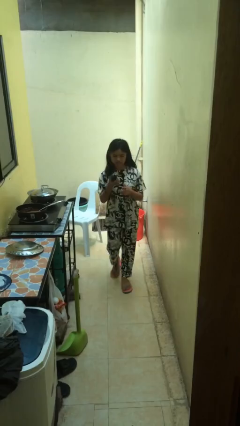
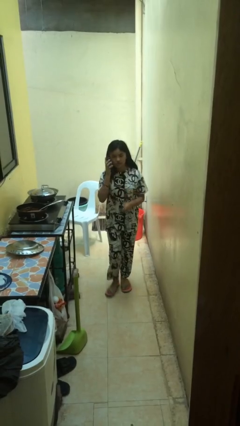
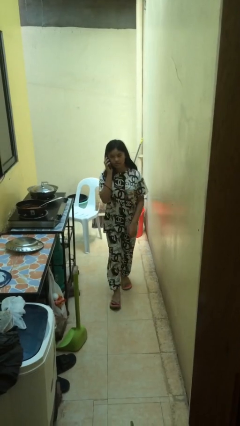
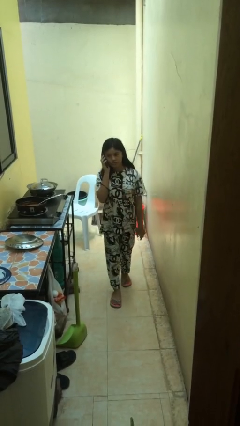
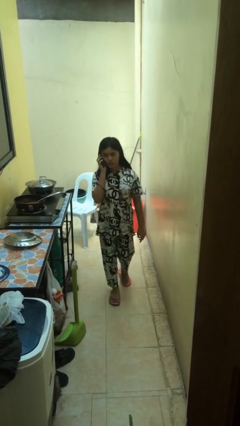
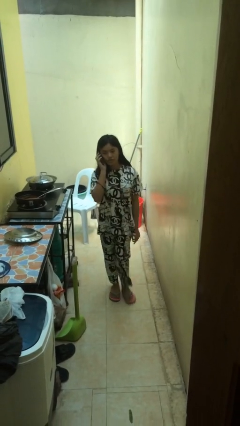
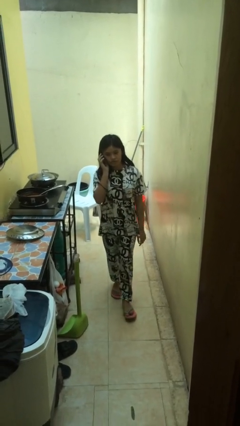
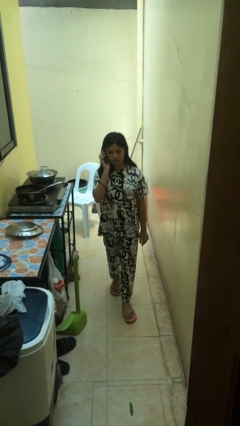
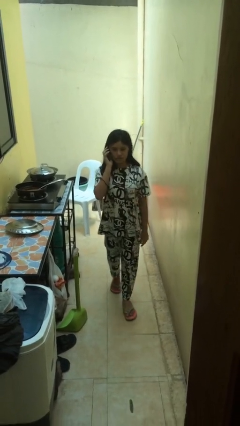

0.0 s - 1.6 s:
person talks on phone

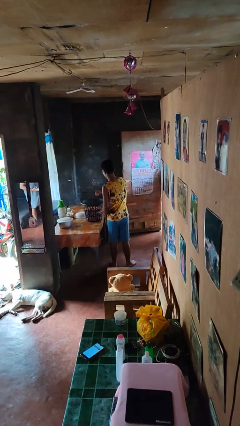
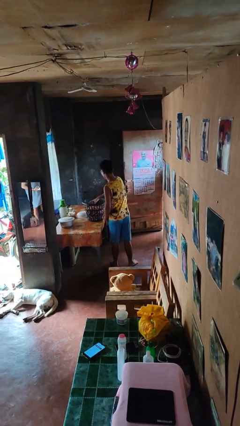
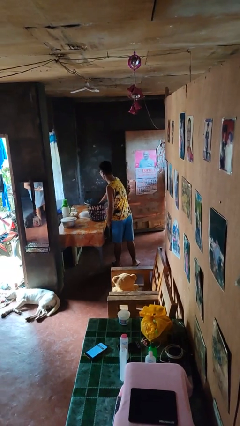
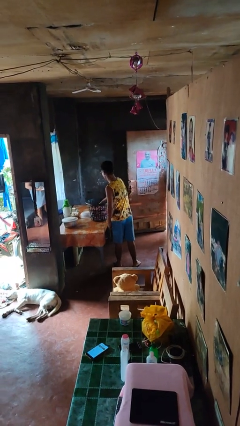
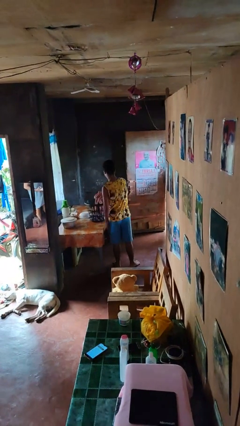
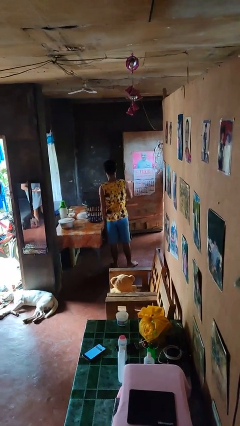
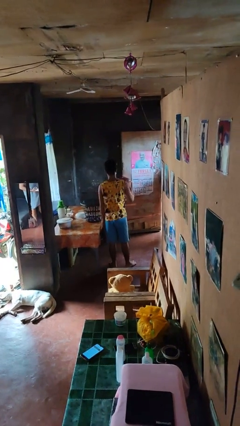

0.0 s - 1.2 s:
person takes object from basket

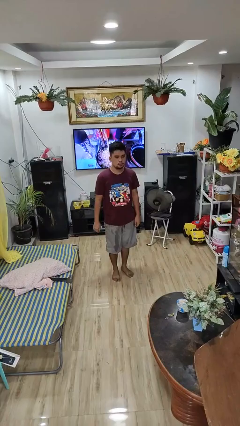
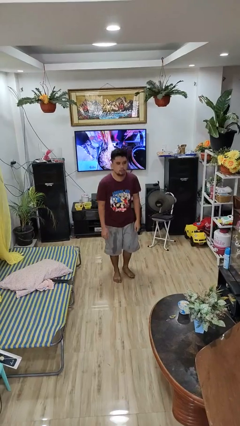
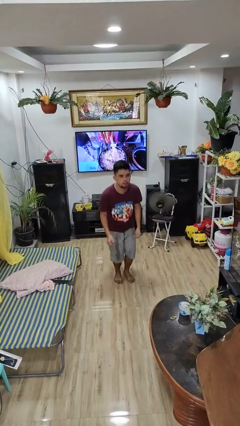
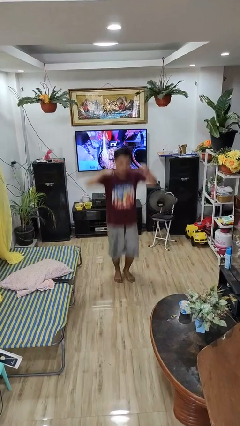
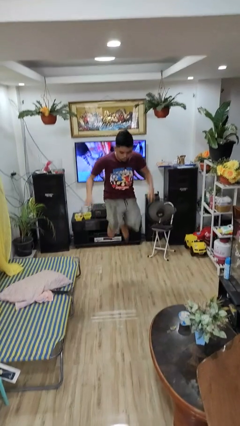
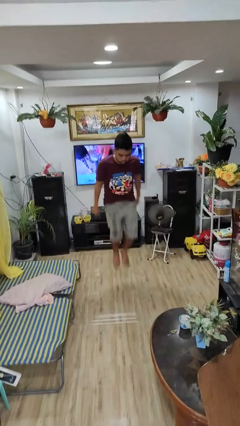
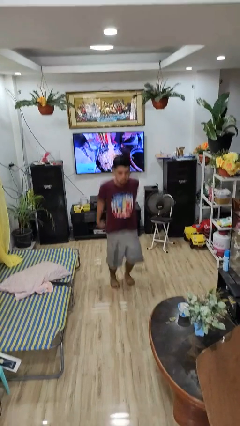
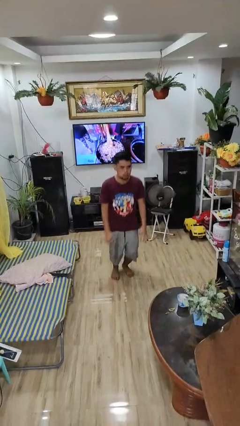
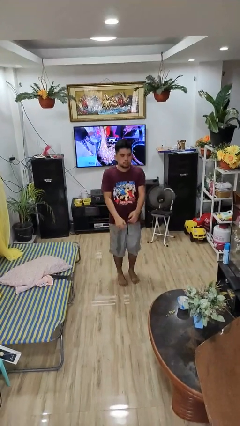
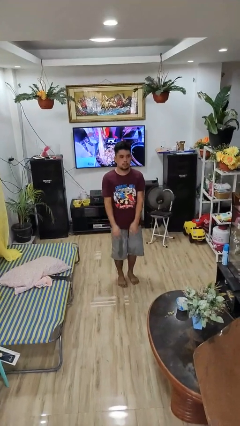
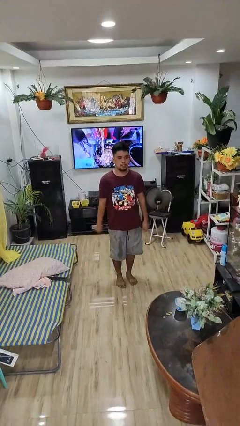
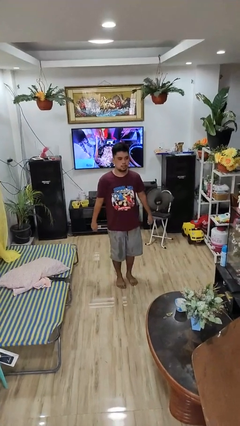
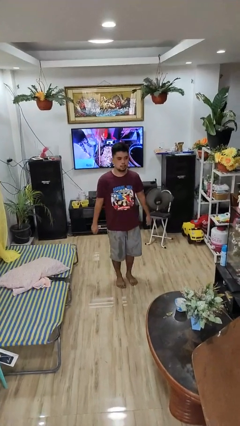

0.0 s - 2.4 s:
person jumps

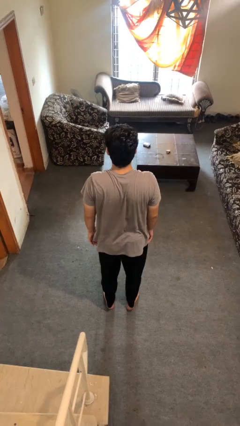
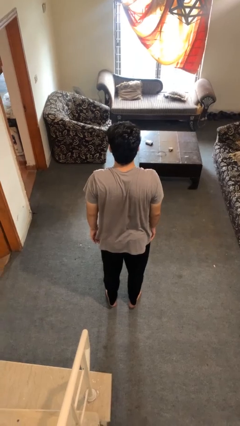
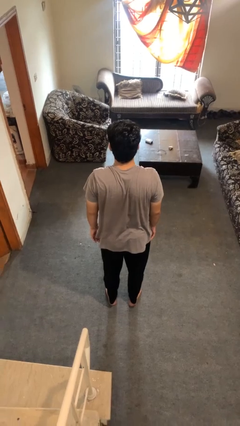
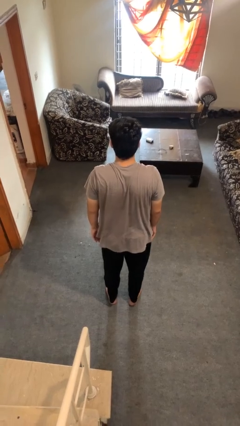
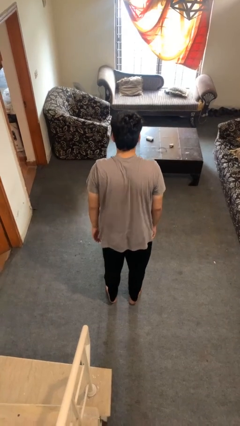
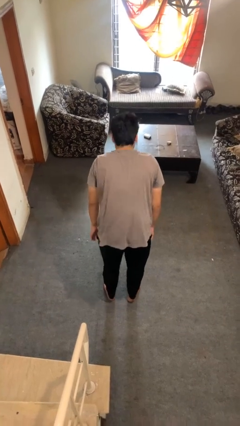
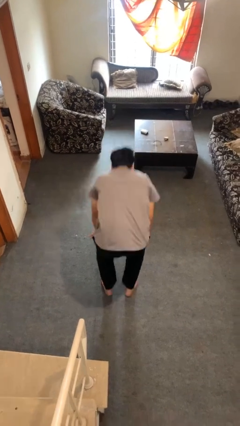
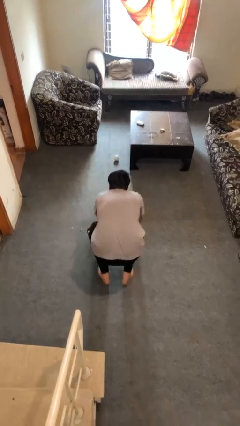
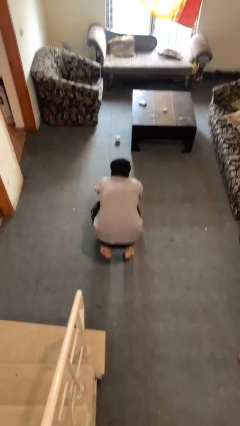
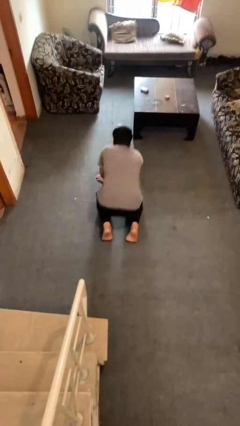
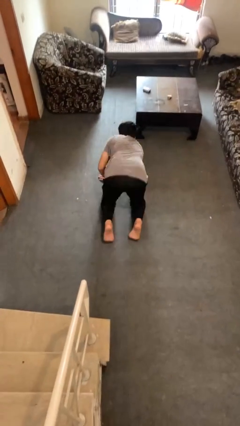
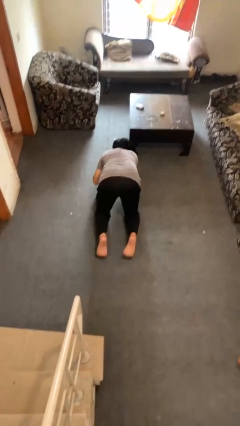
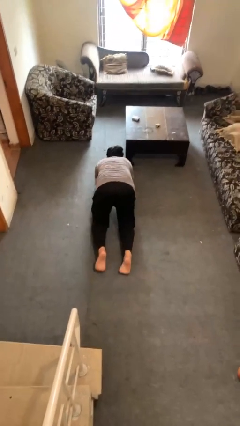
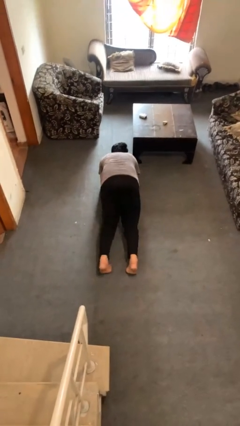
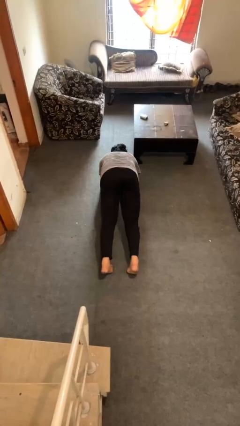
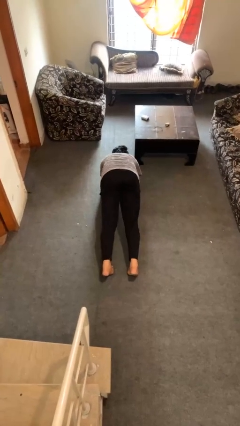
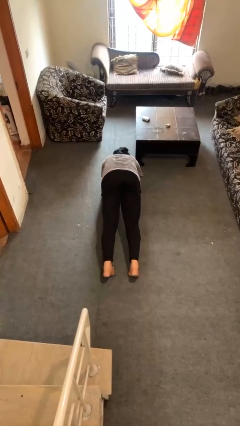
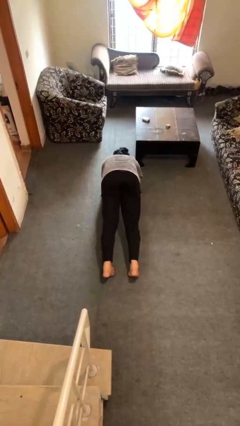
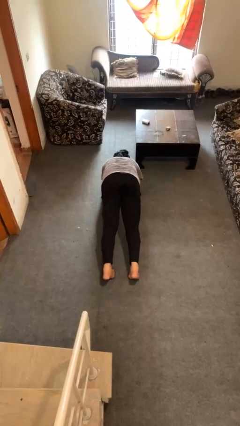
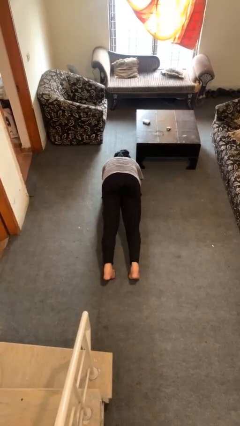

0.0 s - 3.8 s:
person exercises with plank

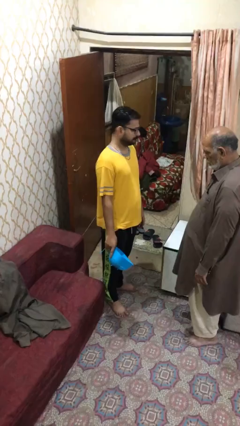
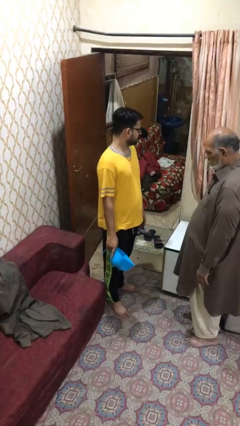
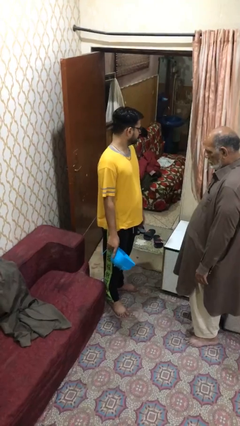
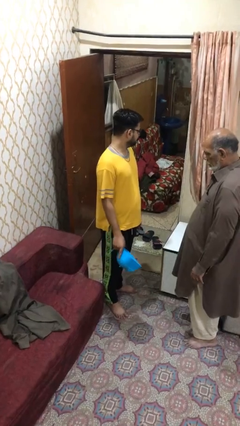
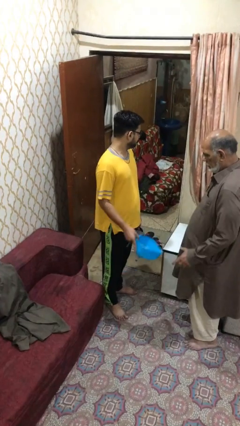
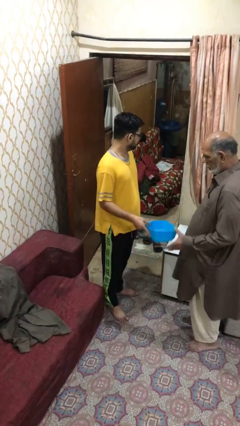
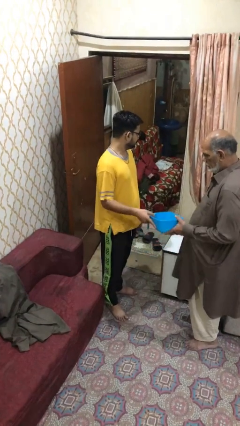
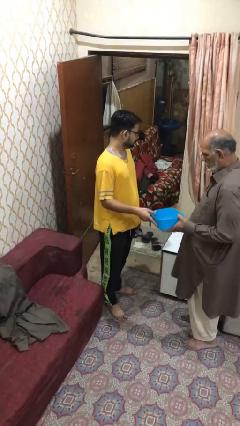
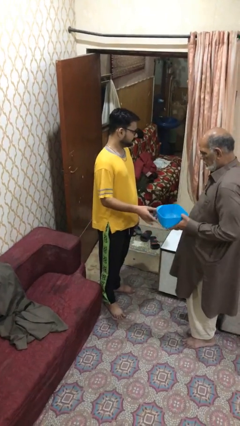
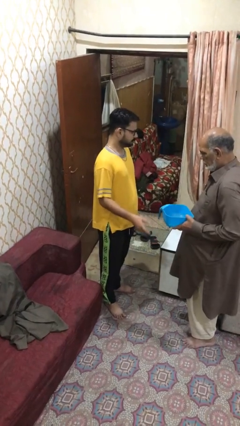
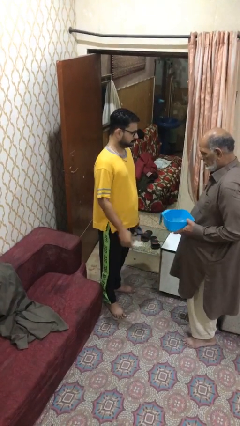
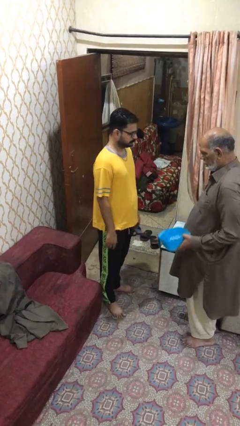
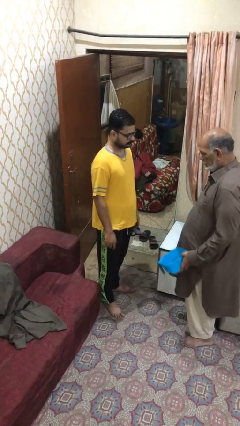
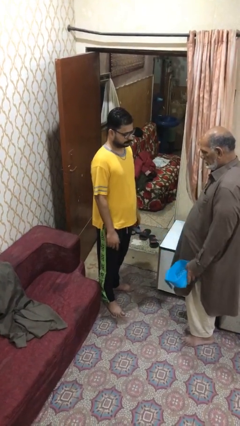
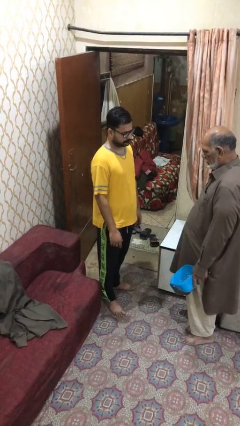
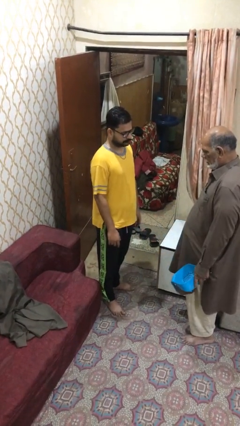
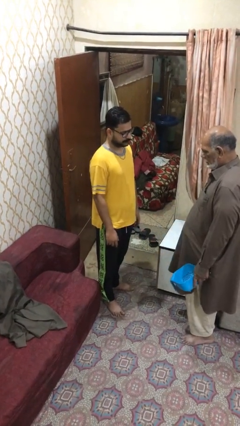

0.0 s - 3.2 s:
person transfers object to person

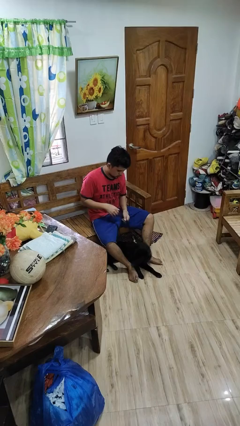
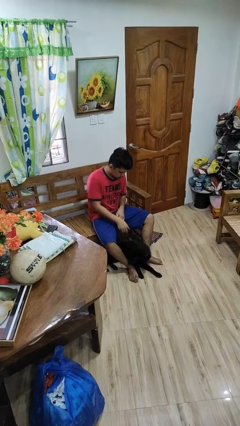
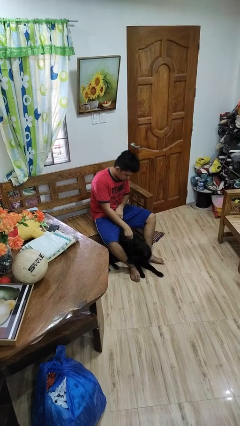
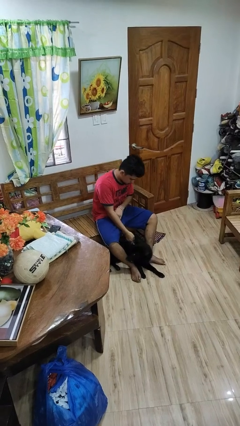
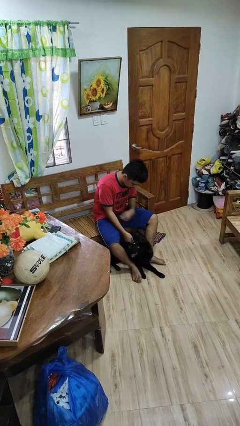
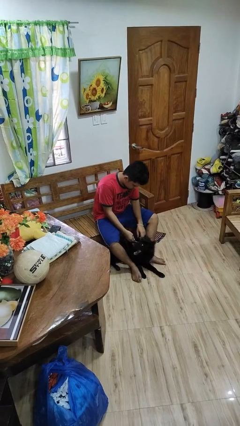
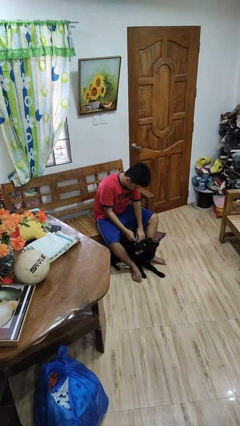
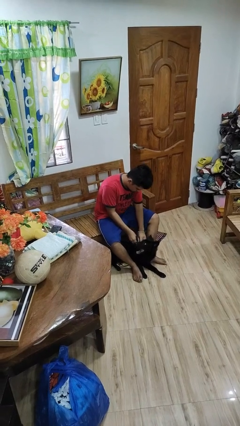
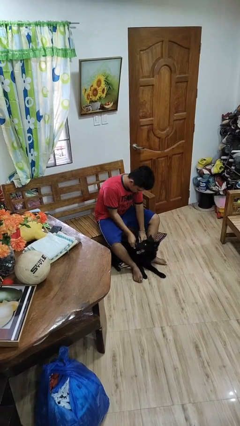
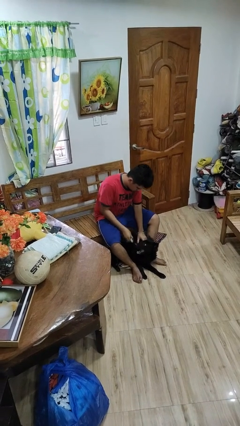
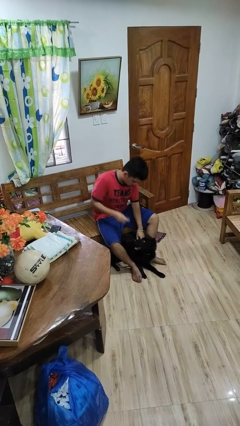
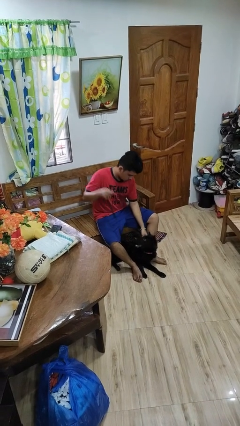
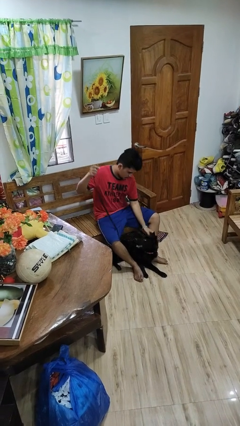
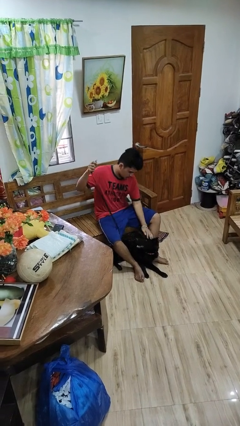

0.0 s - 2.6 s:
person unattaches leash from dog

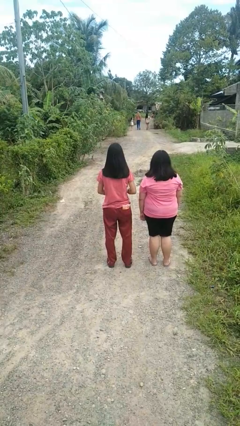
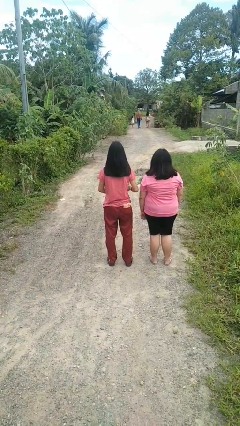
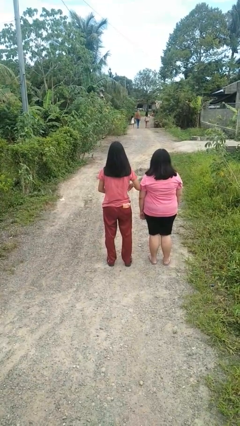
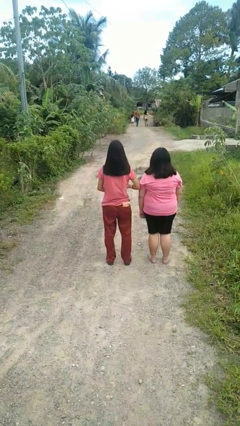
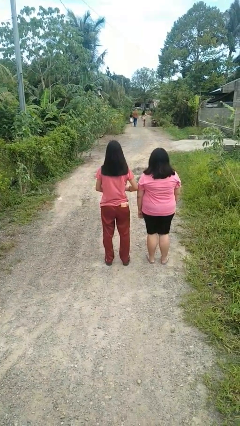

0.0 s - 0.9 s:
person nudges person with elbow

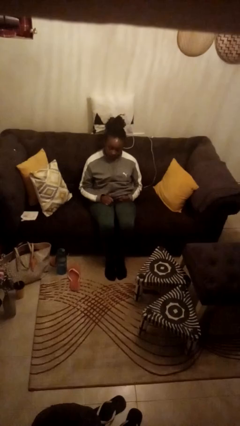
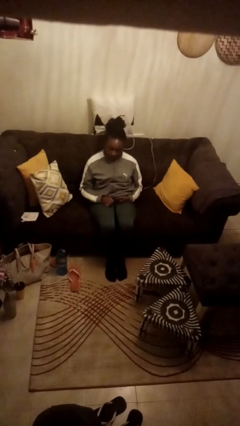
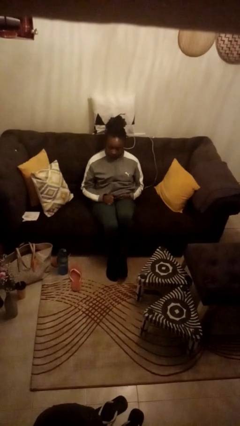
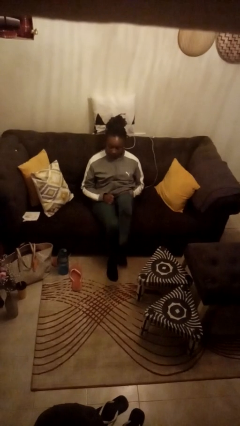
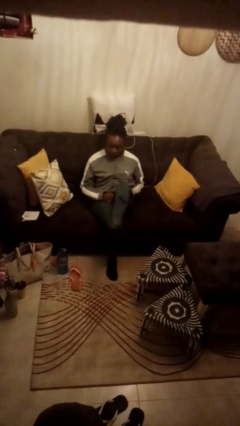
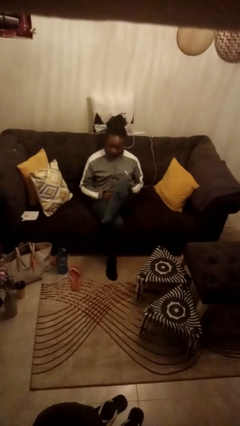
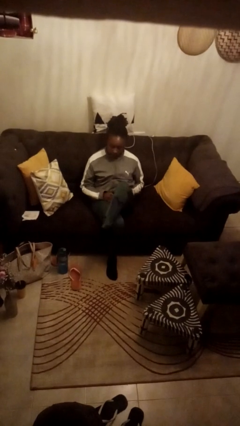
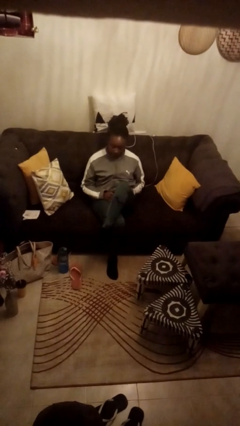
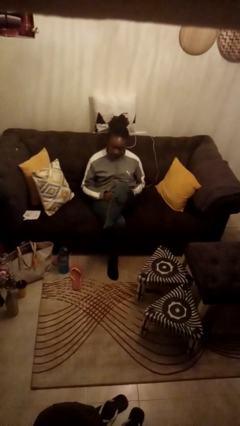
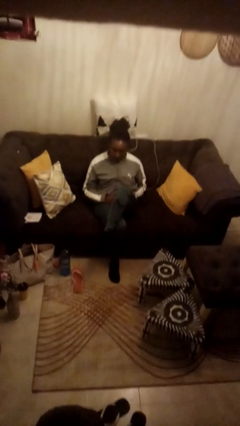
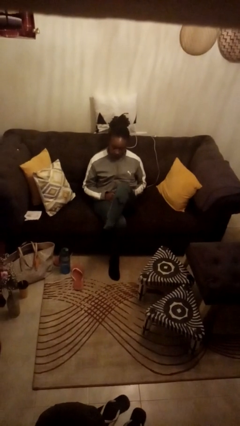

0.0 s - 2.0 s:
person crosses legs
